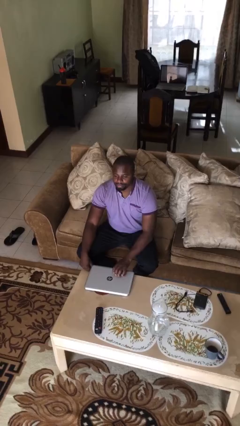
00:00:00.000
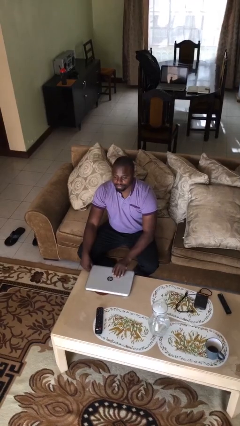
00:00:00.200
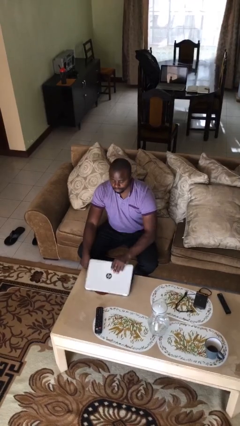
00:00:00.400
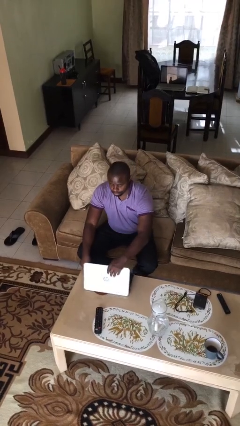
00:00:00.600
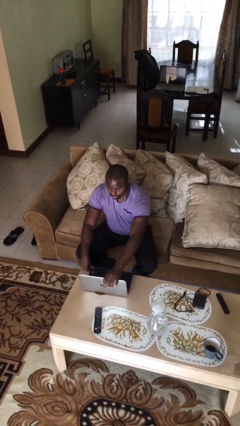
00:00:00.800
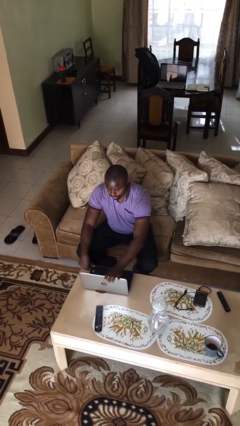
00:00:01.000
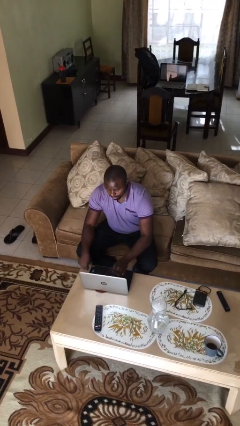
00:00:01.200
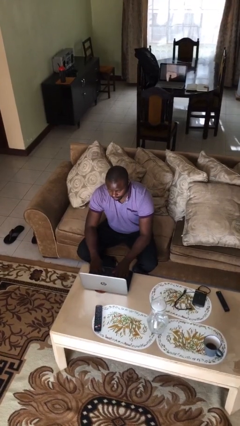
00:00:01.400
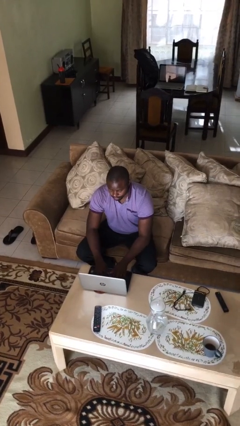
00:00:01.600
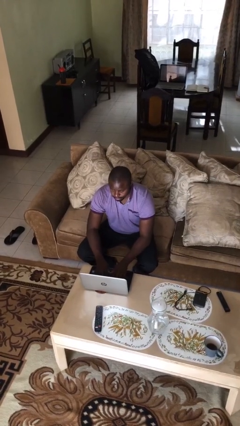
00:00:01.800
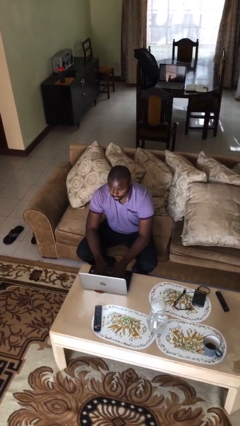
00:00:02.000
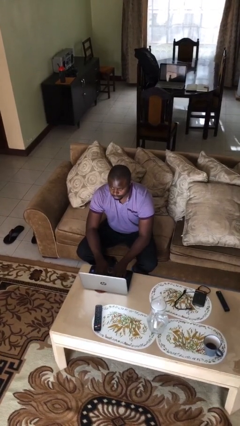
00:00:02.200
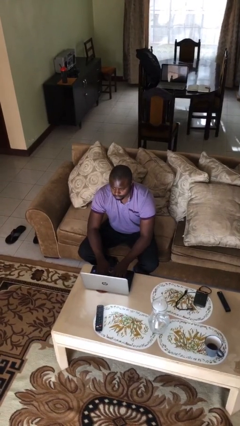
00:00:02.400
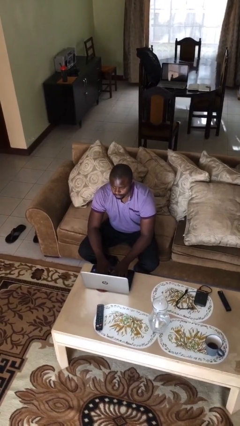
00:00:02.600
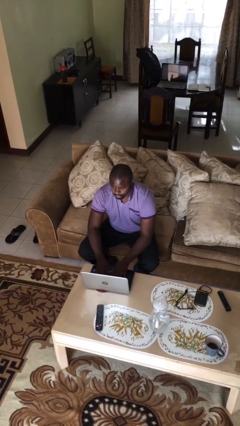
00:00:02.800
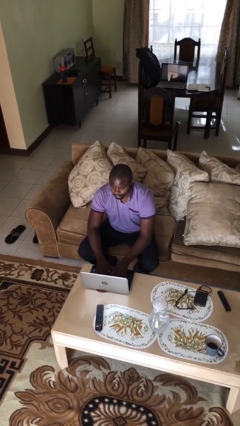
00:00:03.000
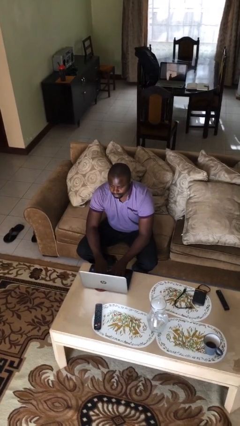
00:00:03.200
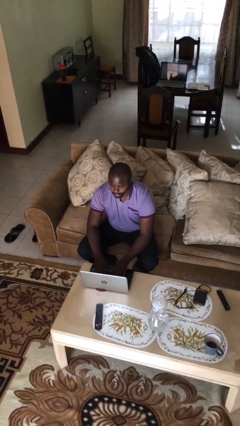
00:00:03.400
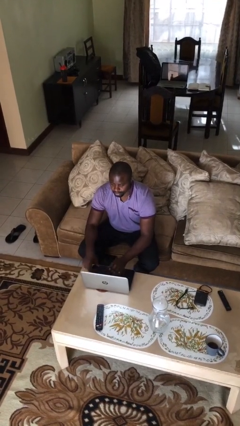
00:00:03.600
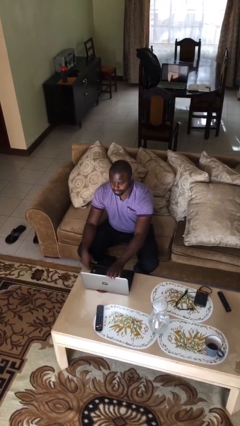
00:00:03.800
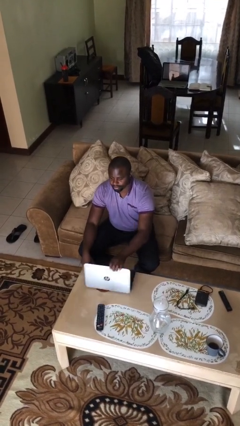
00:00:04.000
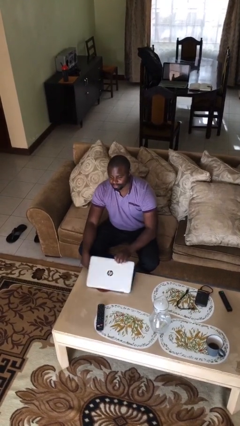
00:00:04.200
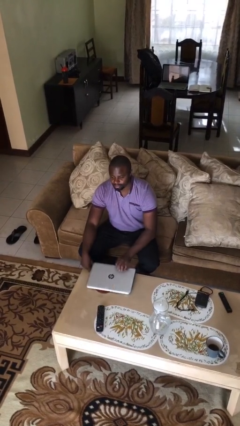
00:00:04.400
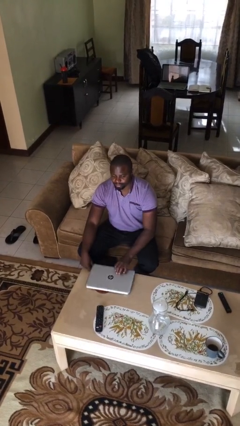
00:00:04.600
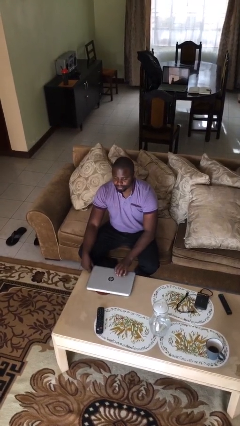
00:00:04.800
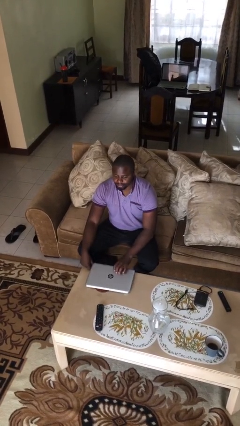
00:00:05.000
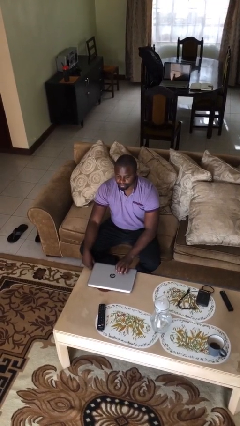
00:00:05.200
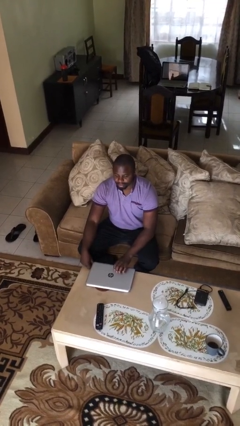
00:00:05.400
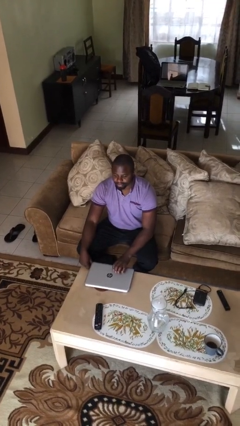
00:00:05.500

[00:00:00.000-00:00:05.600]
person interacts with laptop

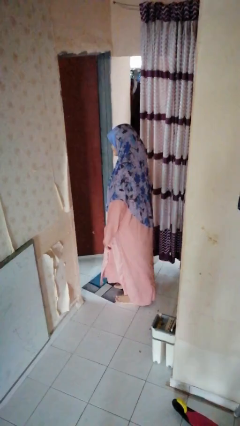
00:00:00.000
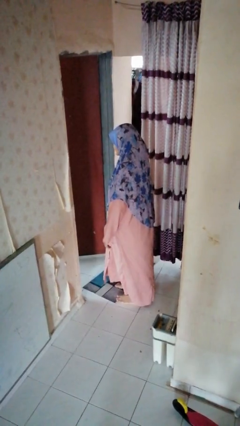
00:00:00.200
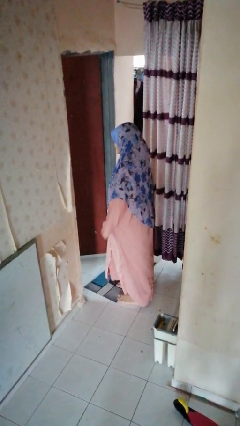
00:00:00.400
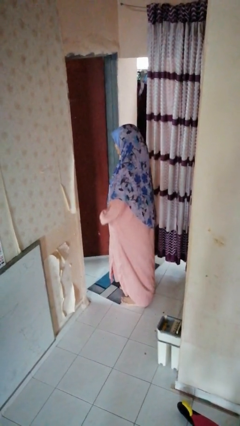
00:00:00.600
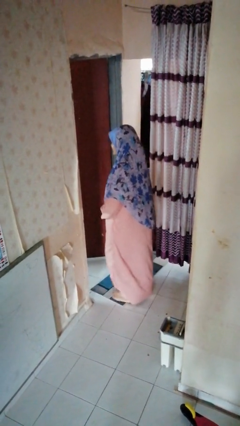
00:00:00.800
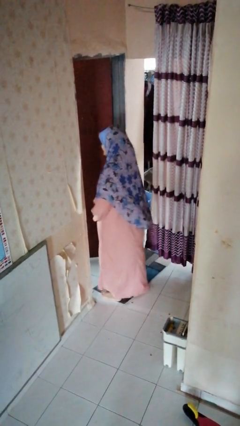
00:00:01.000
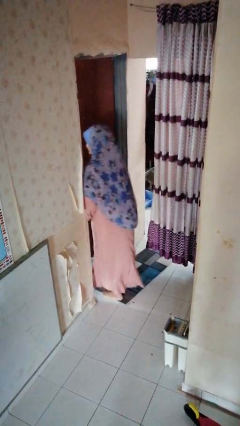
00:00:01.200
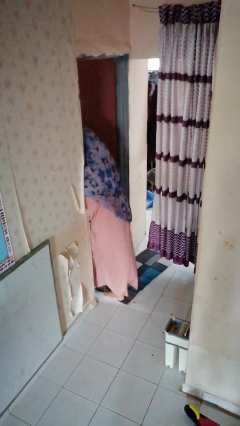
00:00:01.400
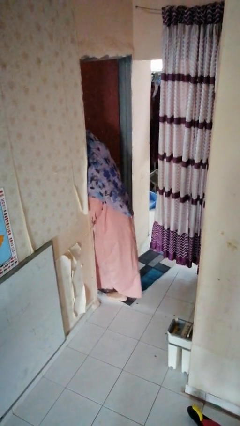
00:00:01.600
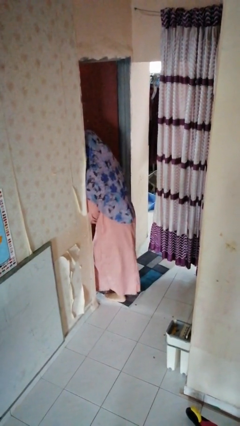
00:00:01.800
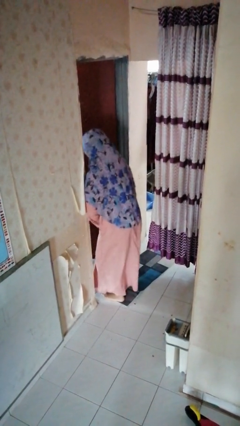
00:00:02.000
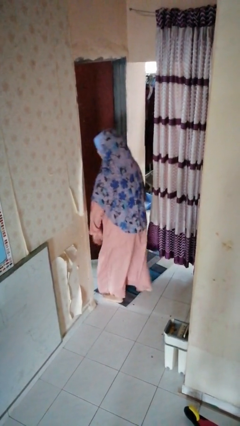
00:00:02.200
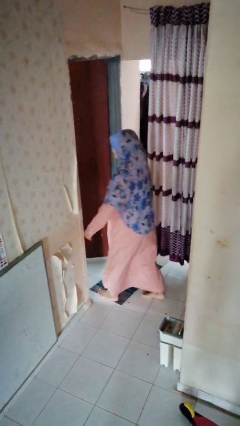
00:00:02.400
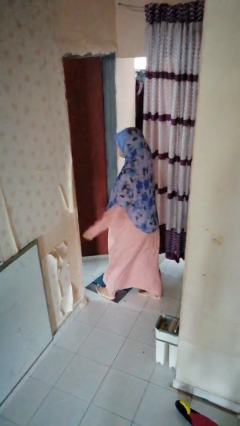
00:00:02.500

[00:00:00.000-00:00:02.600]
person bumps into wall

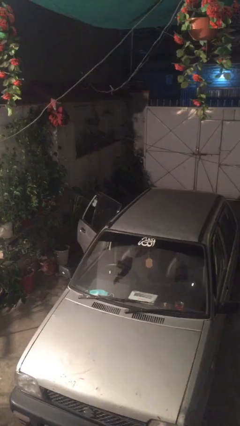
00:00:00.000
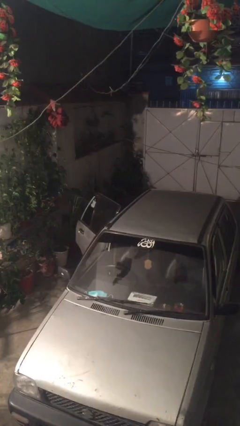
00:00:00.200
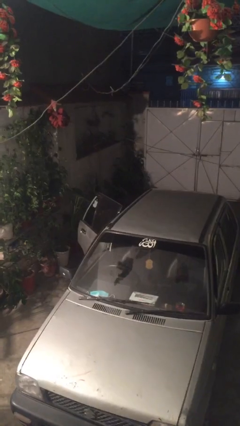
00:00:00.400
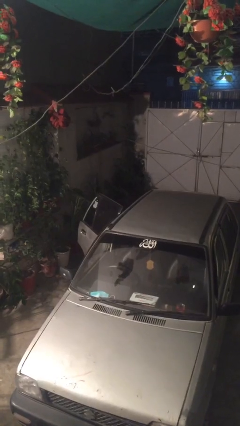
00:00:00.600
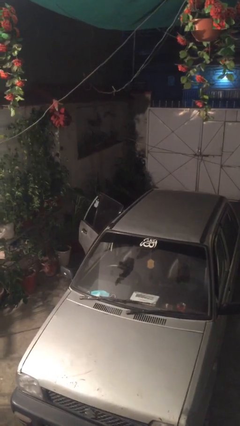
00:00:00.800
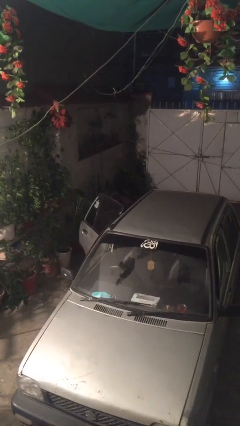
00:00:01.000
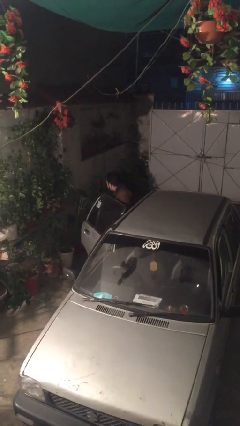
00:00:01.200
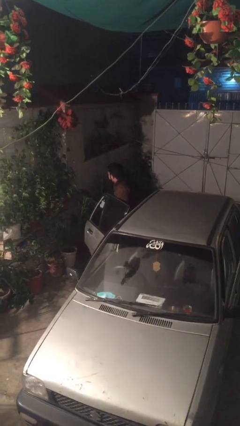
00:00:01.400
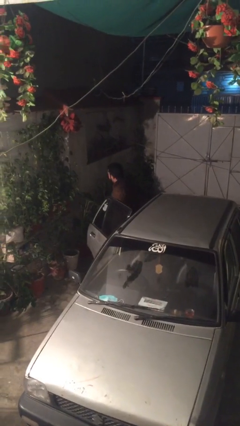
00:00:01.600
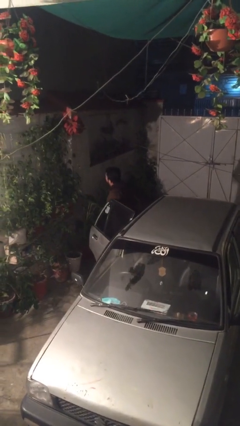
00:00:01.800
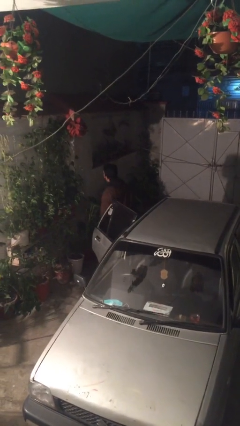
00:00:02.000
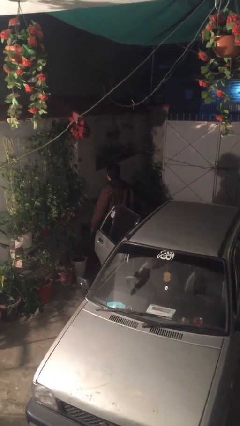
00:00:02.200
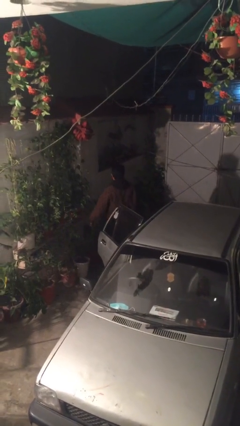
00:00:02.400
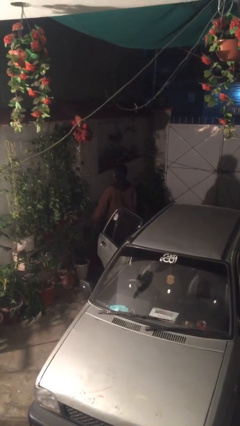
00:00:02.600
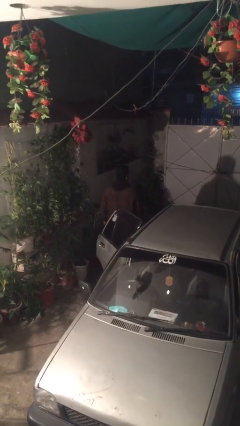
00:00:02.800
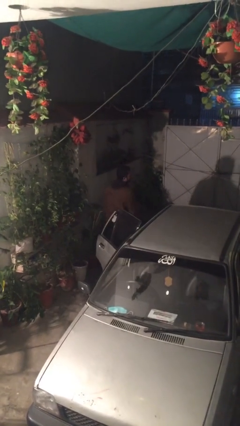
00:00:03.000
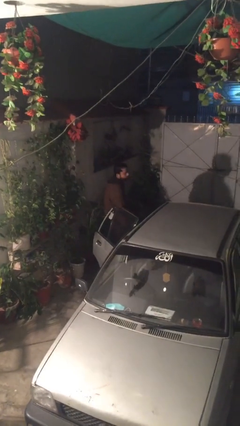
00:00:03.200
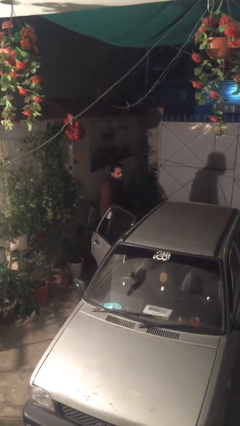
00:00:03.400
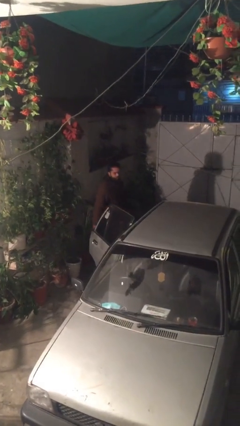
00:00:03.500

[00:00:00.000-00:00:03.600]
person exits car

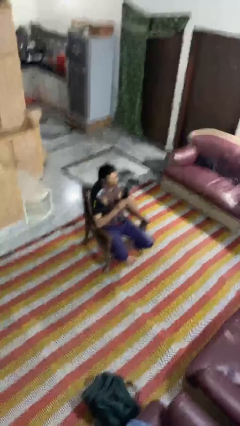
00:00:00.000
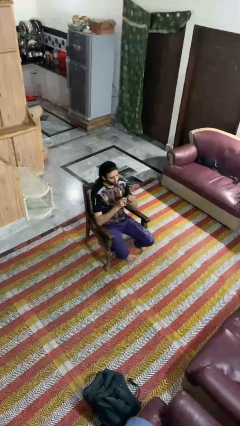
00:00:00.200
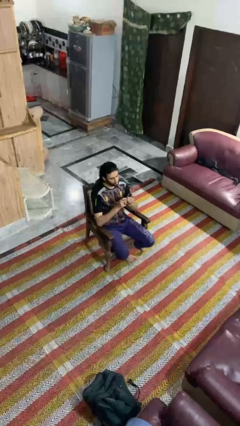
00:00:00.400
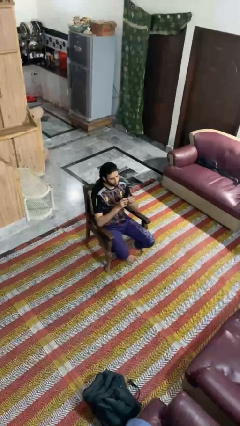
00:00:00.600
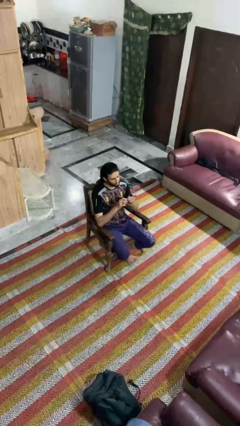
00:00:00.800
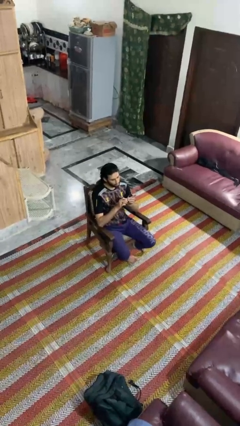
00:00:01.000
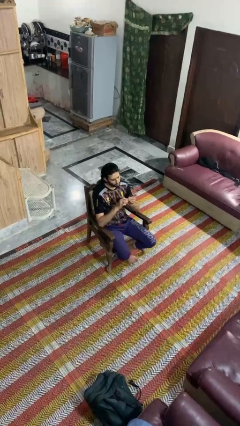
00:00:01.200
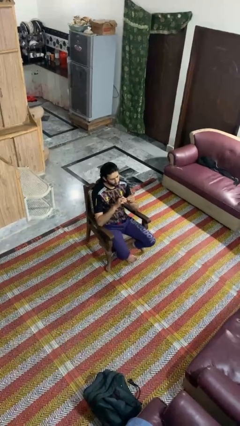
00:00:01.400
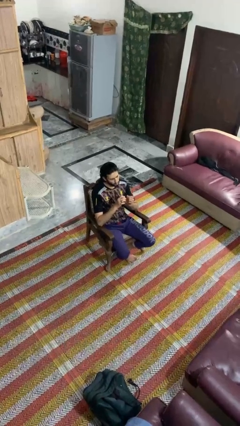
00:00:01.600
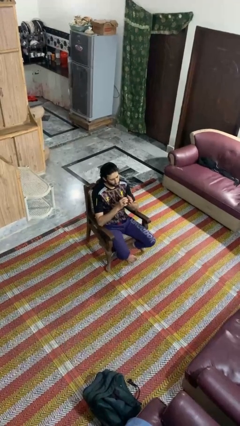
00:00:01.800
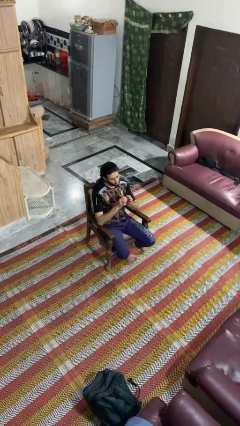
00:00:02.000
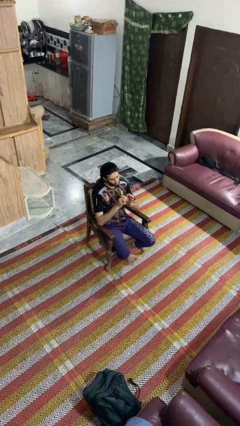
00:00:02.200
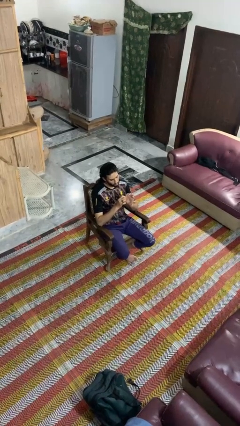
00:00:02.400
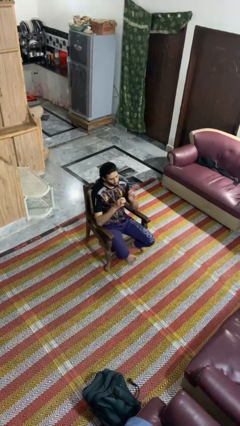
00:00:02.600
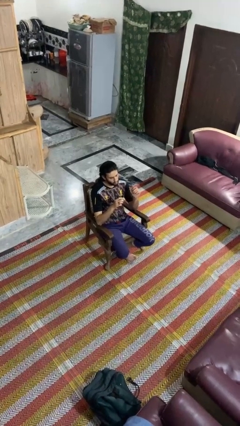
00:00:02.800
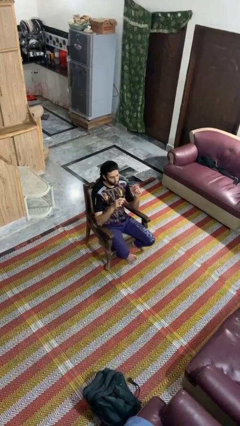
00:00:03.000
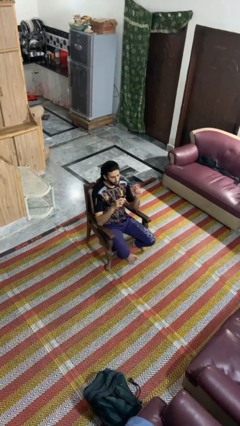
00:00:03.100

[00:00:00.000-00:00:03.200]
person files fingernails

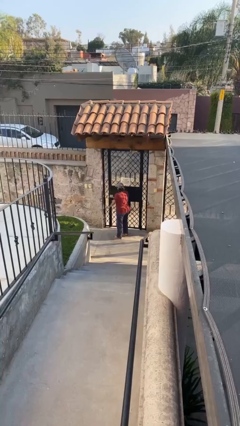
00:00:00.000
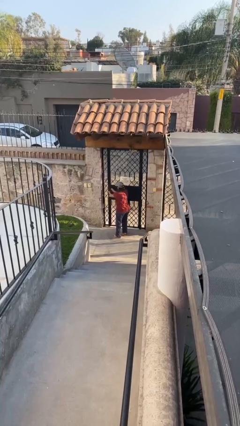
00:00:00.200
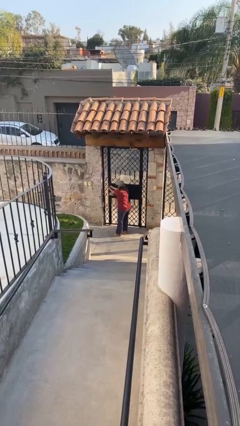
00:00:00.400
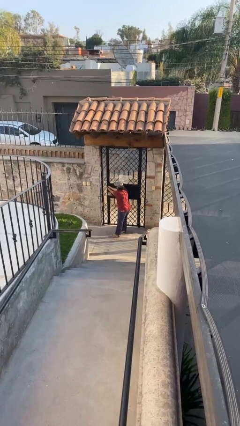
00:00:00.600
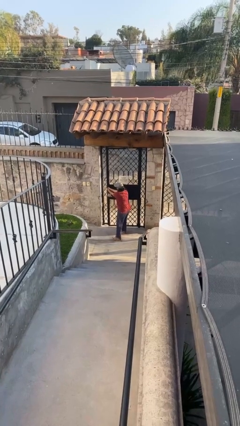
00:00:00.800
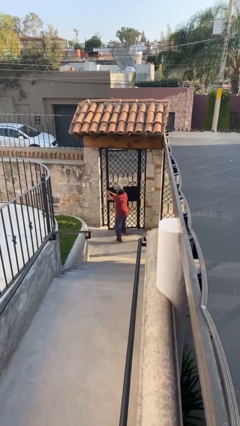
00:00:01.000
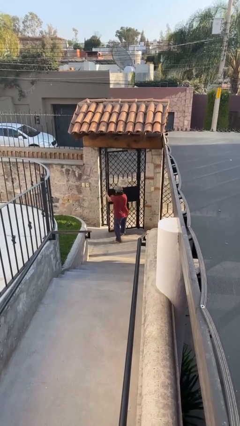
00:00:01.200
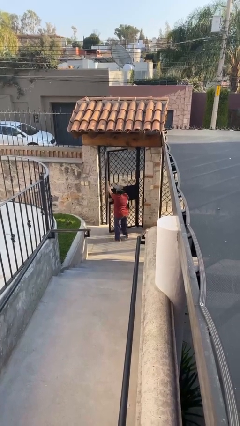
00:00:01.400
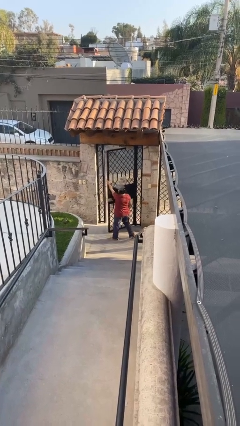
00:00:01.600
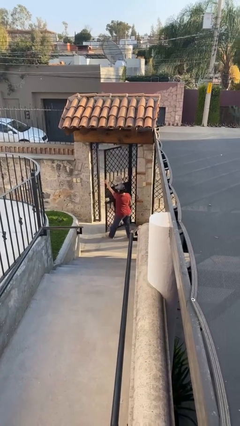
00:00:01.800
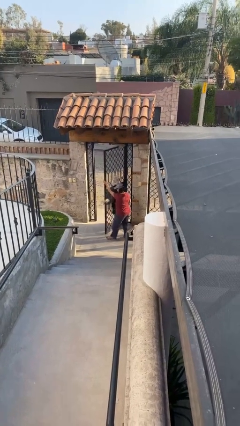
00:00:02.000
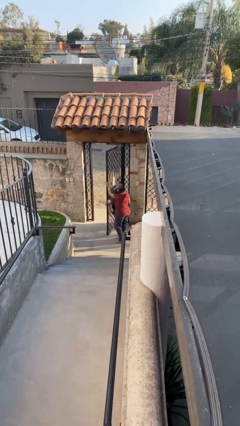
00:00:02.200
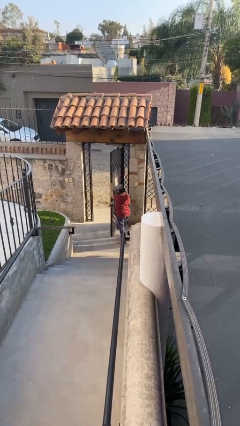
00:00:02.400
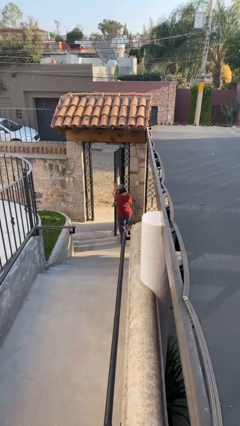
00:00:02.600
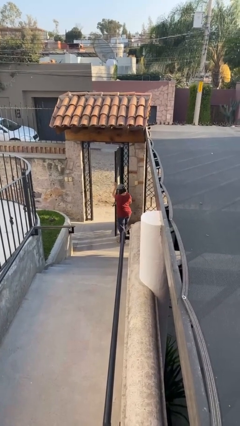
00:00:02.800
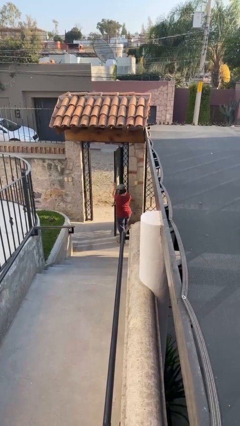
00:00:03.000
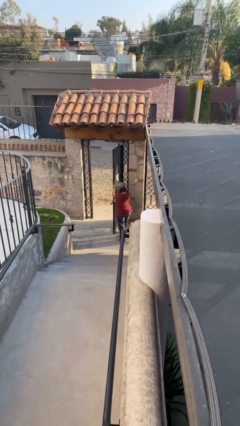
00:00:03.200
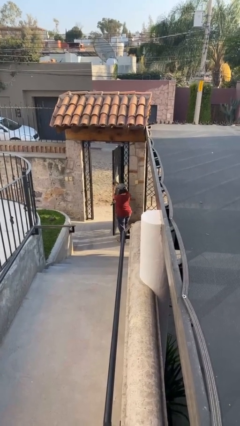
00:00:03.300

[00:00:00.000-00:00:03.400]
person opens facility door
